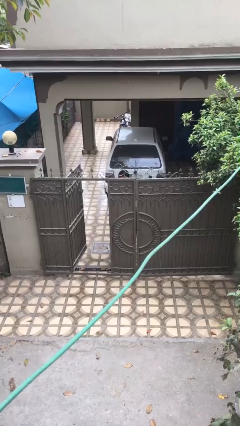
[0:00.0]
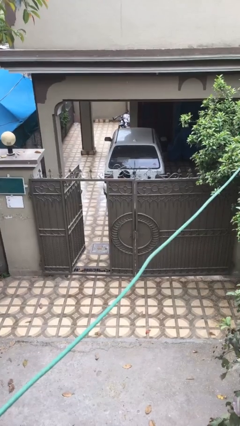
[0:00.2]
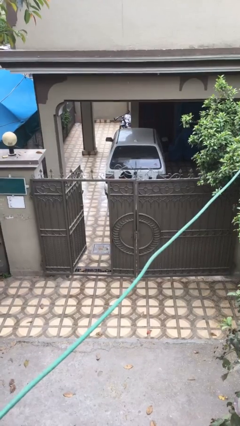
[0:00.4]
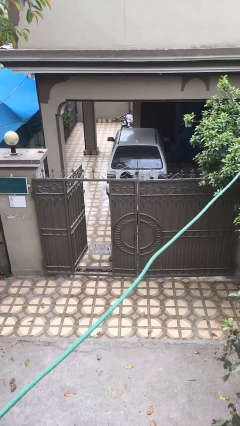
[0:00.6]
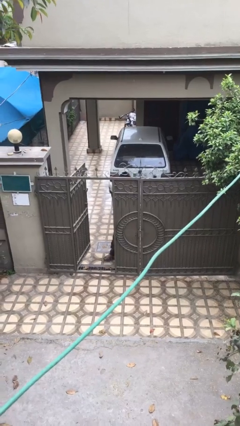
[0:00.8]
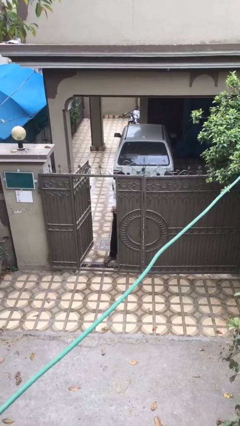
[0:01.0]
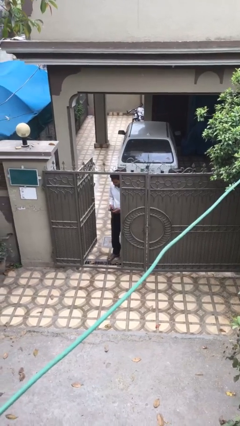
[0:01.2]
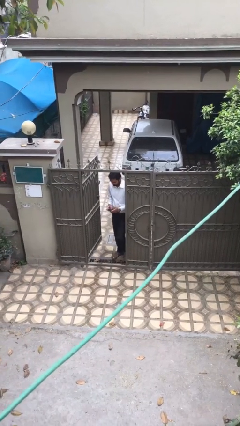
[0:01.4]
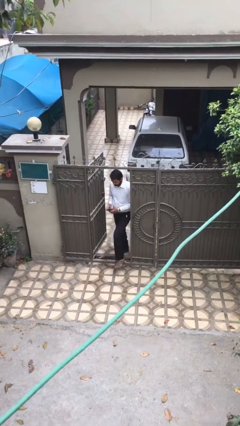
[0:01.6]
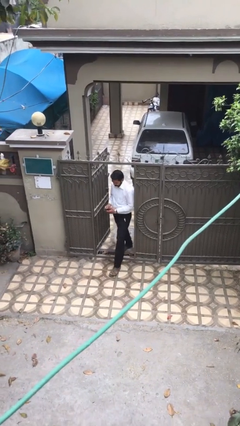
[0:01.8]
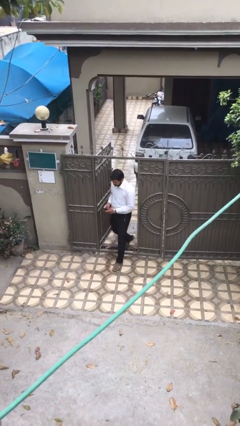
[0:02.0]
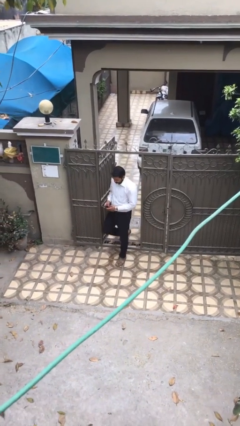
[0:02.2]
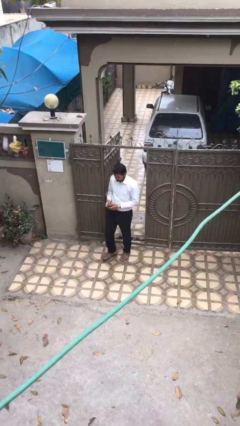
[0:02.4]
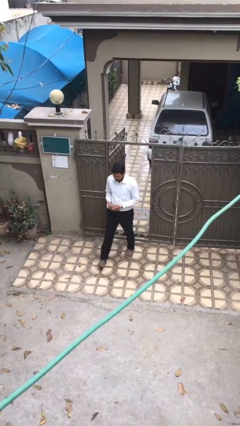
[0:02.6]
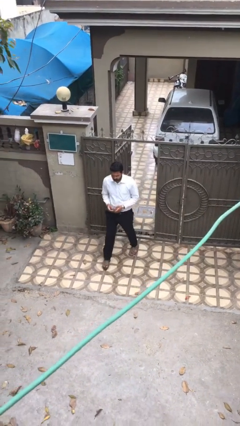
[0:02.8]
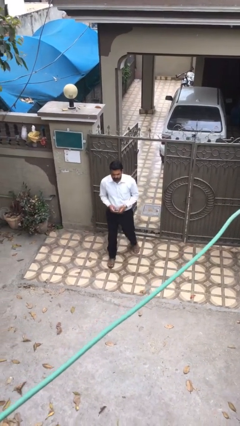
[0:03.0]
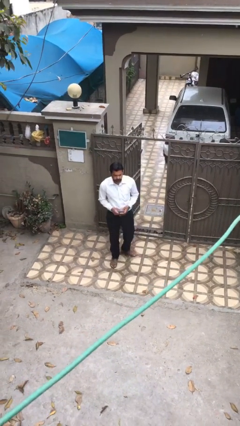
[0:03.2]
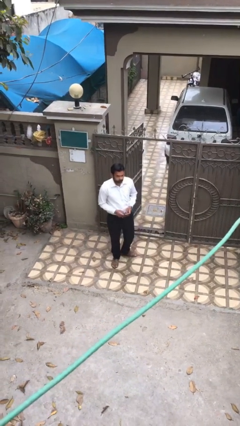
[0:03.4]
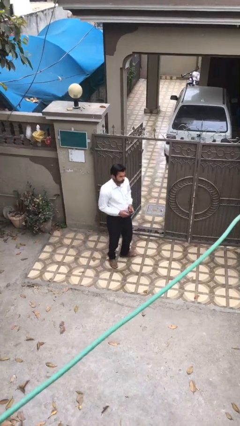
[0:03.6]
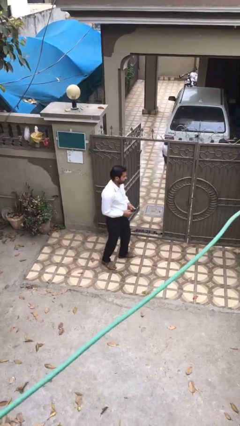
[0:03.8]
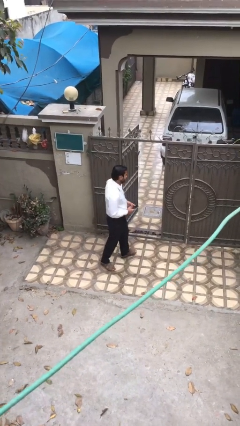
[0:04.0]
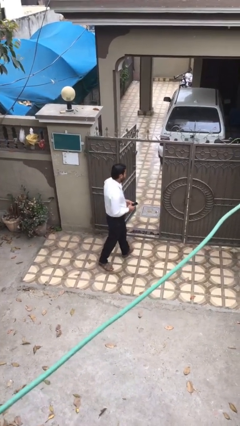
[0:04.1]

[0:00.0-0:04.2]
person enters scene through structure

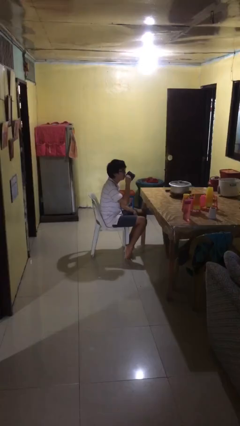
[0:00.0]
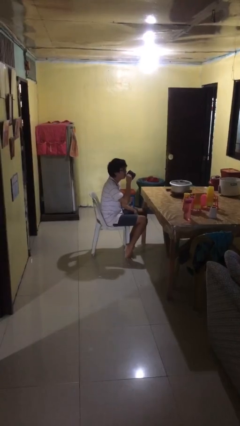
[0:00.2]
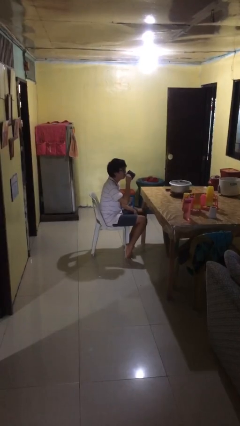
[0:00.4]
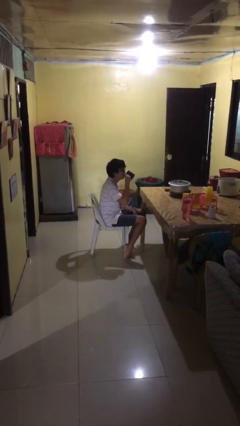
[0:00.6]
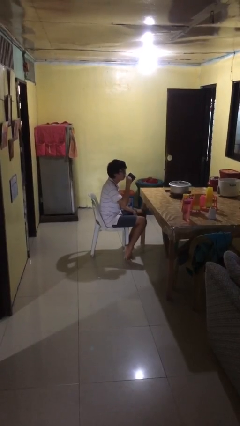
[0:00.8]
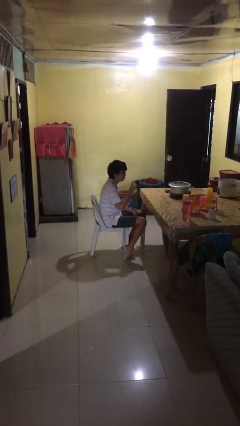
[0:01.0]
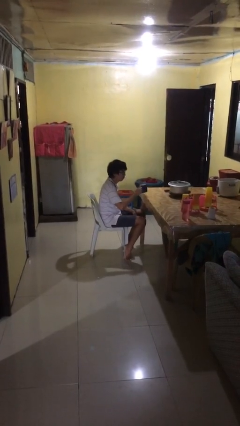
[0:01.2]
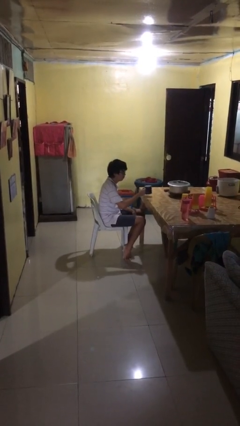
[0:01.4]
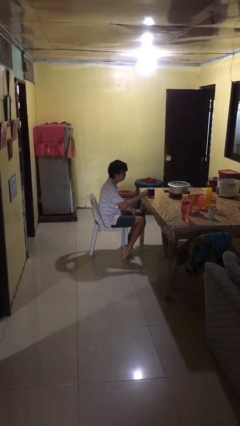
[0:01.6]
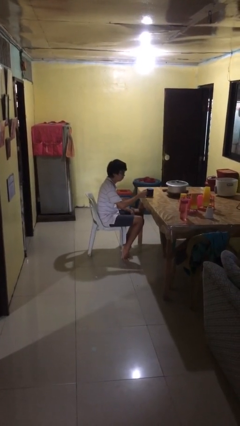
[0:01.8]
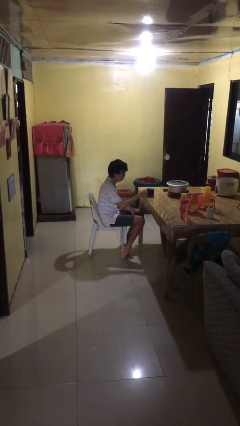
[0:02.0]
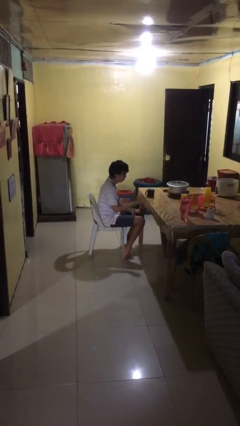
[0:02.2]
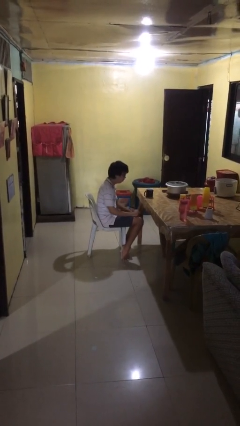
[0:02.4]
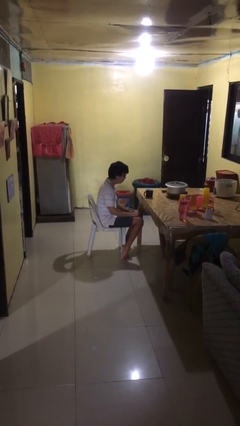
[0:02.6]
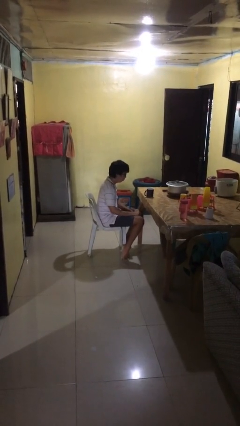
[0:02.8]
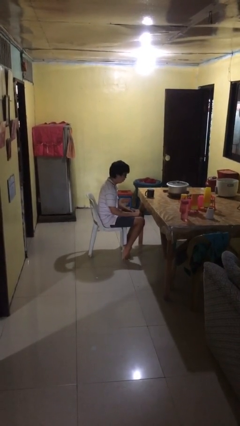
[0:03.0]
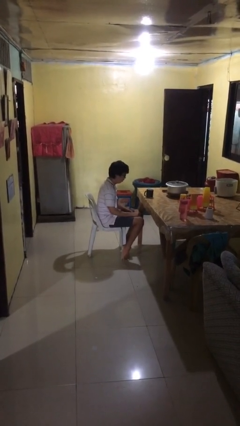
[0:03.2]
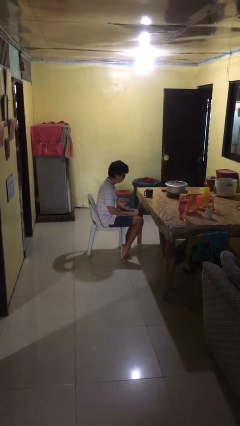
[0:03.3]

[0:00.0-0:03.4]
person puts down object on table

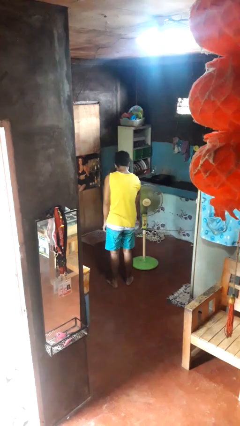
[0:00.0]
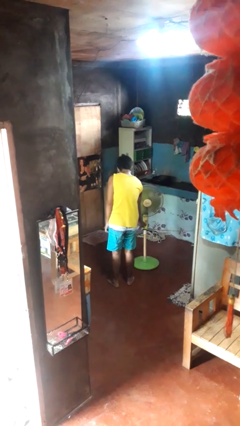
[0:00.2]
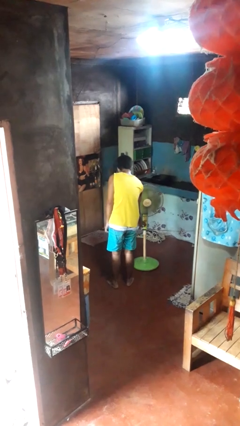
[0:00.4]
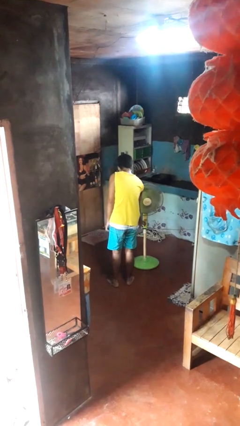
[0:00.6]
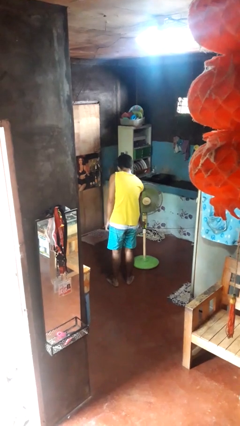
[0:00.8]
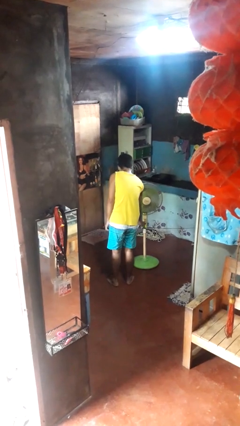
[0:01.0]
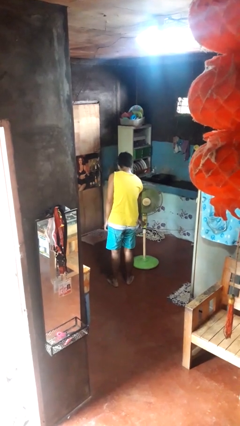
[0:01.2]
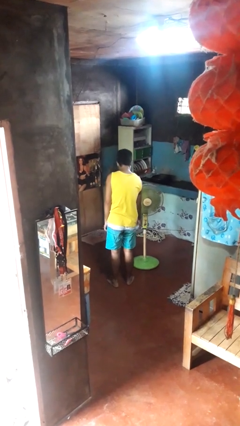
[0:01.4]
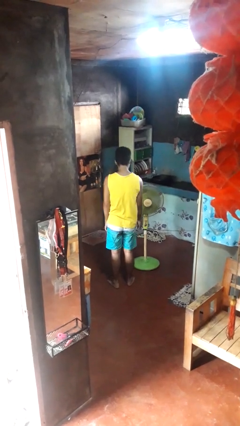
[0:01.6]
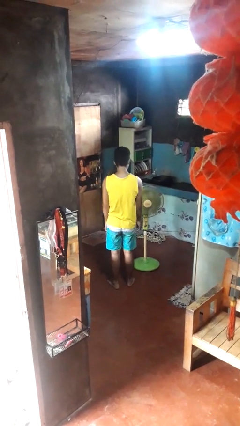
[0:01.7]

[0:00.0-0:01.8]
person turns on fan

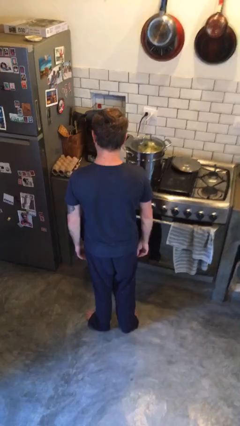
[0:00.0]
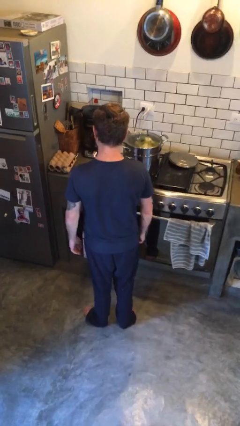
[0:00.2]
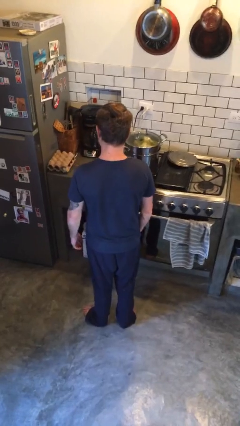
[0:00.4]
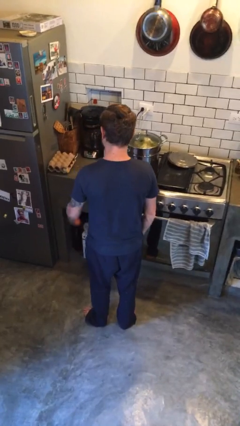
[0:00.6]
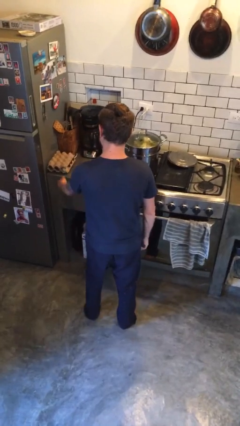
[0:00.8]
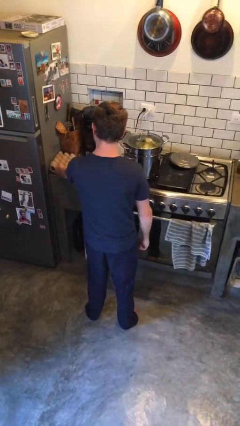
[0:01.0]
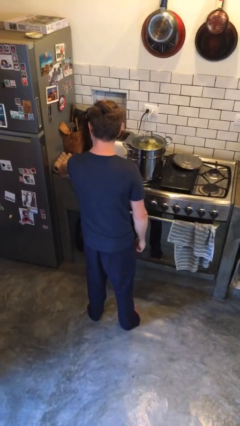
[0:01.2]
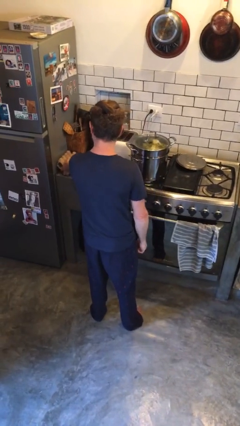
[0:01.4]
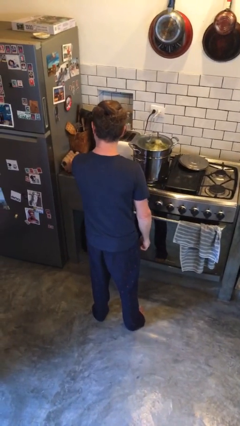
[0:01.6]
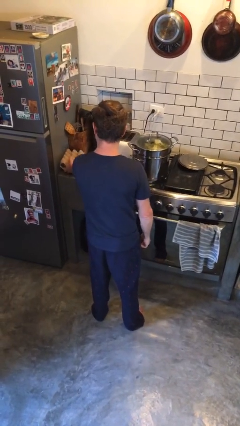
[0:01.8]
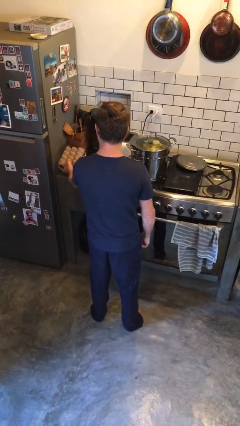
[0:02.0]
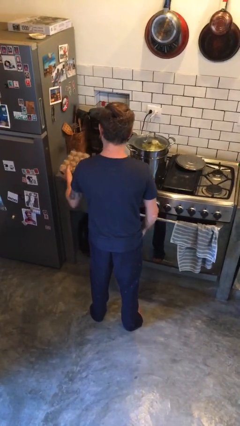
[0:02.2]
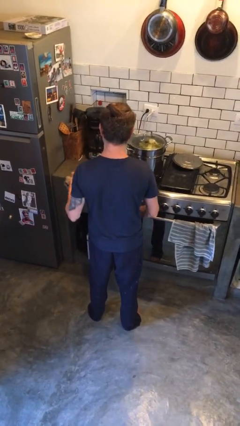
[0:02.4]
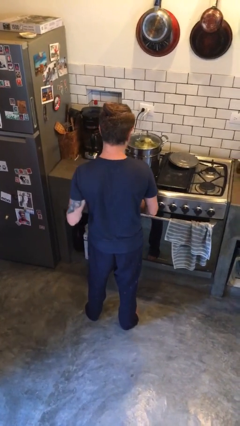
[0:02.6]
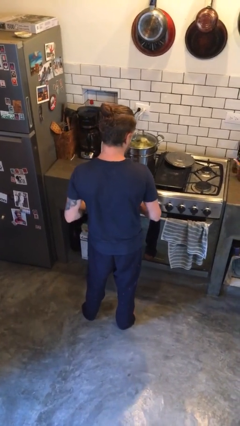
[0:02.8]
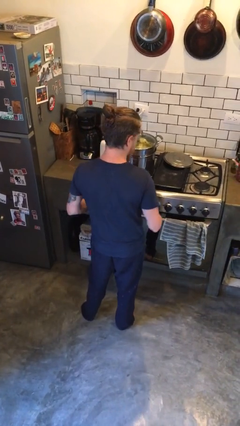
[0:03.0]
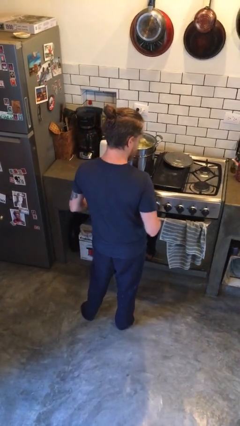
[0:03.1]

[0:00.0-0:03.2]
person picks up object from countertop

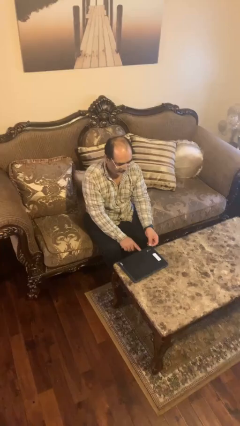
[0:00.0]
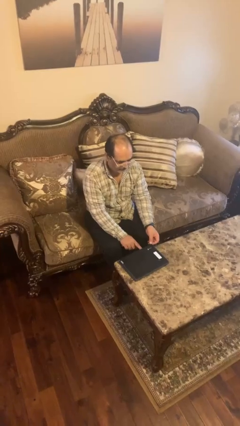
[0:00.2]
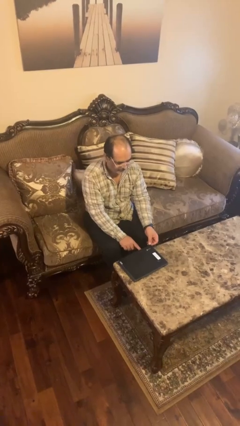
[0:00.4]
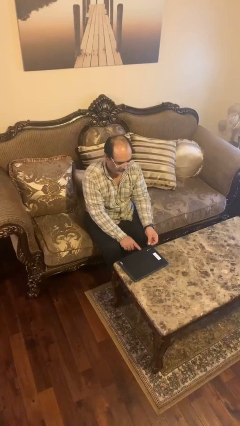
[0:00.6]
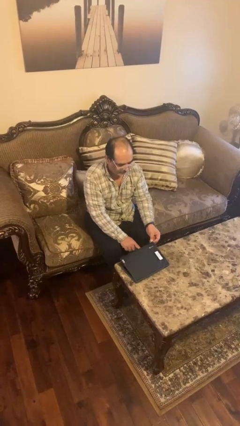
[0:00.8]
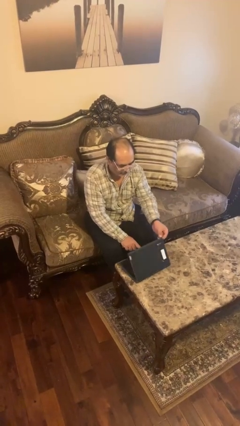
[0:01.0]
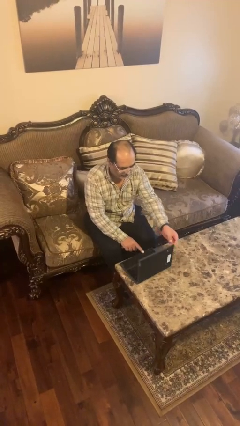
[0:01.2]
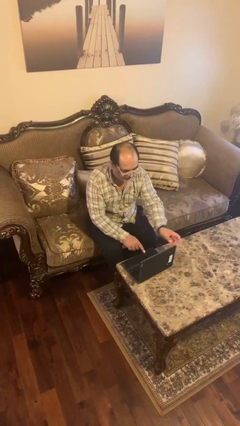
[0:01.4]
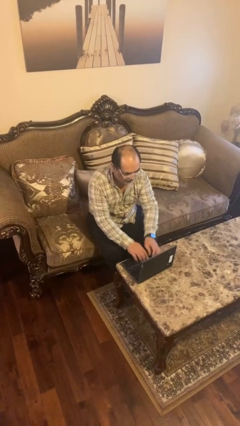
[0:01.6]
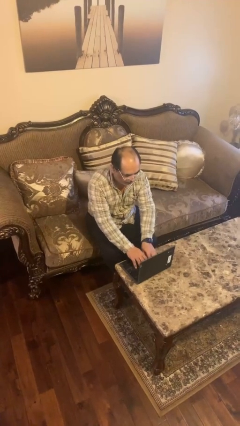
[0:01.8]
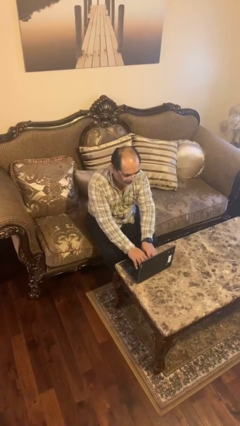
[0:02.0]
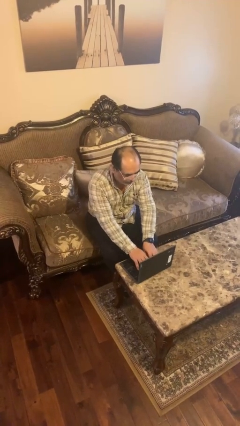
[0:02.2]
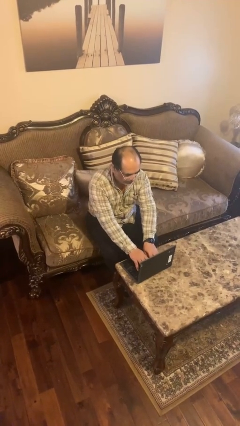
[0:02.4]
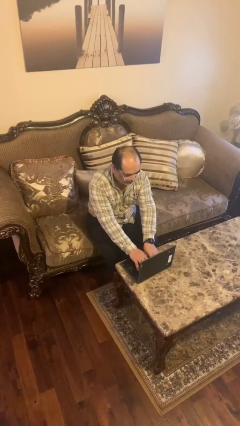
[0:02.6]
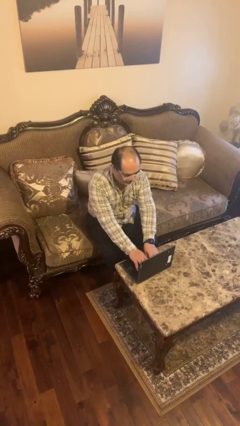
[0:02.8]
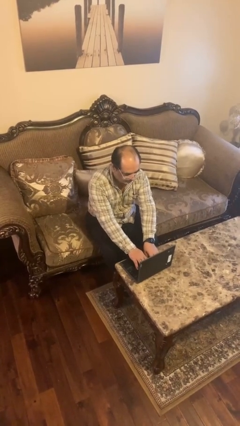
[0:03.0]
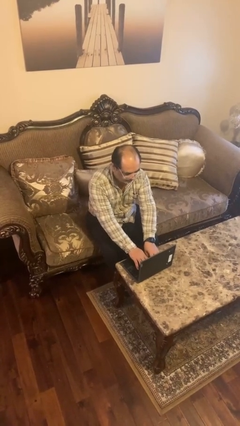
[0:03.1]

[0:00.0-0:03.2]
person interacts with laptop

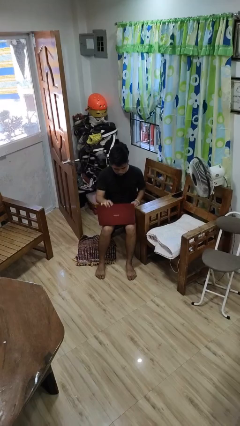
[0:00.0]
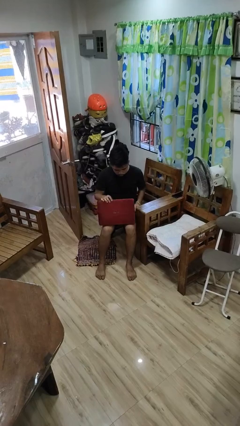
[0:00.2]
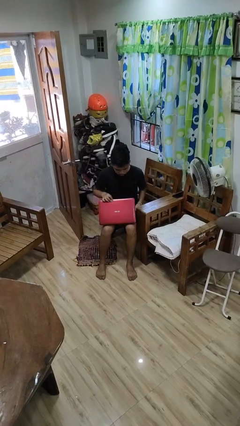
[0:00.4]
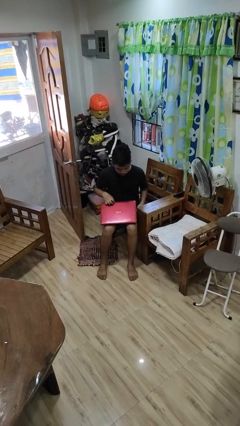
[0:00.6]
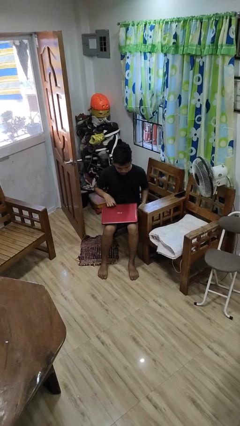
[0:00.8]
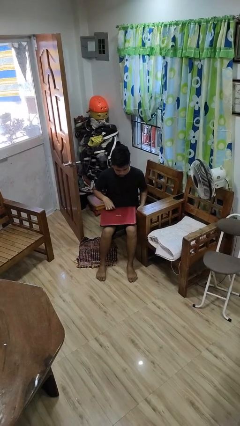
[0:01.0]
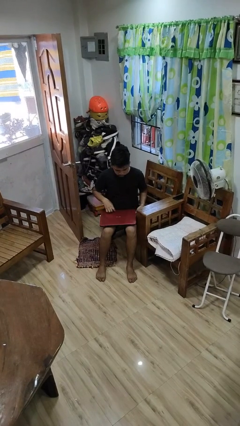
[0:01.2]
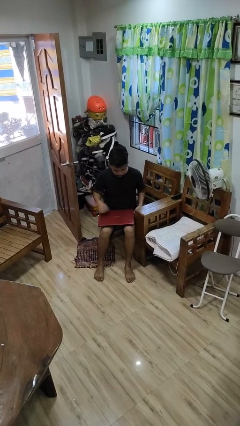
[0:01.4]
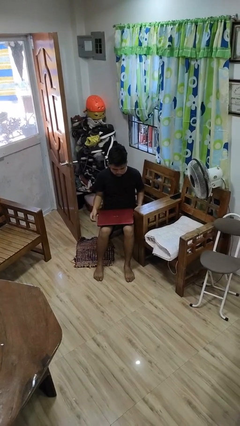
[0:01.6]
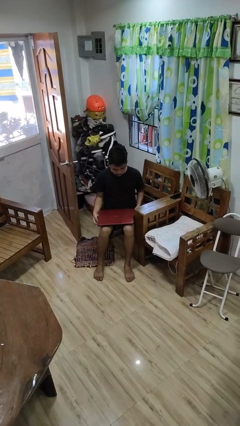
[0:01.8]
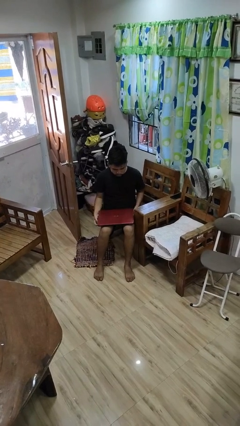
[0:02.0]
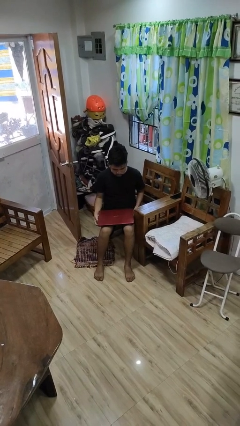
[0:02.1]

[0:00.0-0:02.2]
person closes laptop
